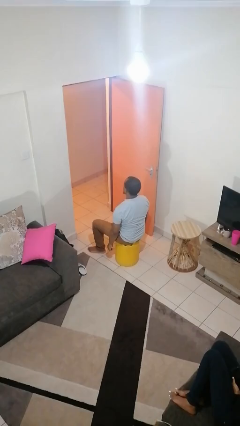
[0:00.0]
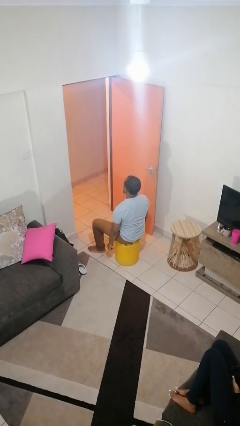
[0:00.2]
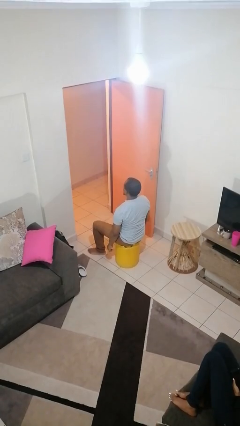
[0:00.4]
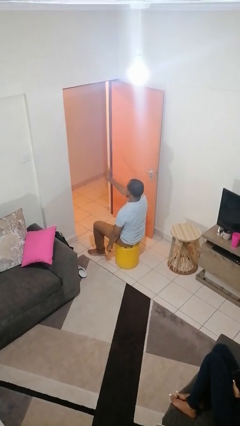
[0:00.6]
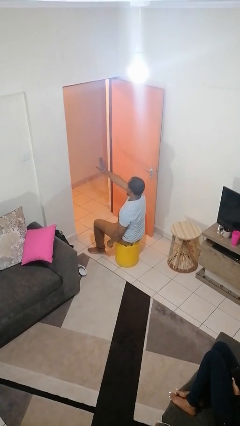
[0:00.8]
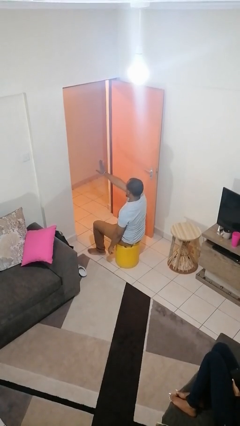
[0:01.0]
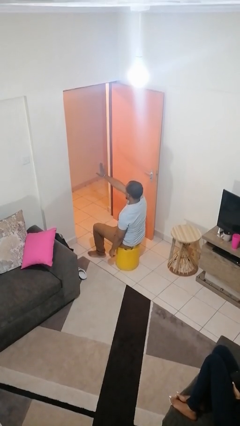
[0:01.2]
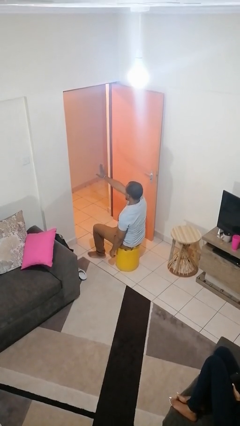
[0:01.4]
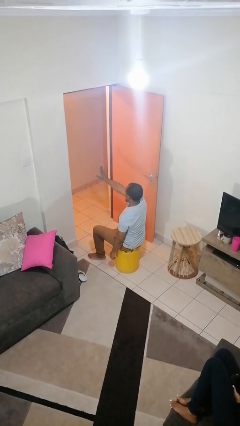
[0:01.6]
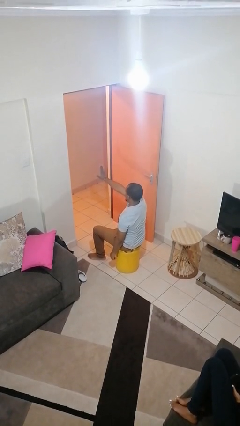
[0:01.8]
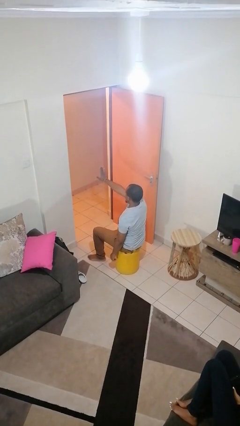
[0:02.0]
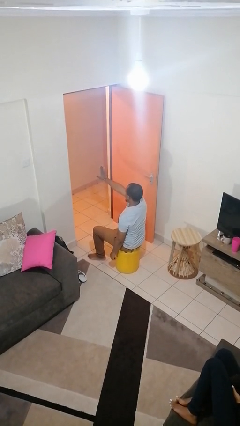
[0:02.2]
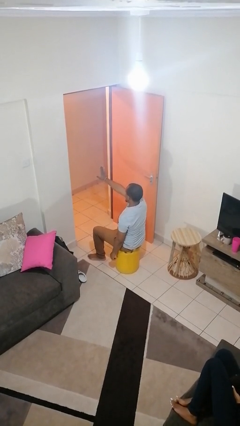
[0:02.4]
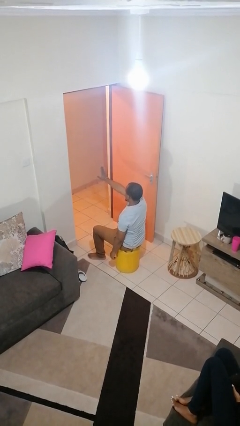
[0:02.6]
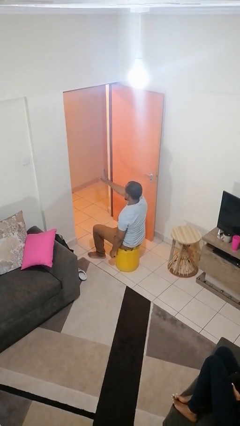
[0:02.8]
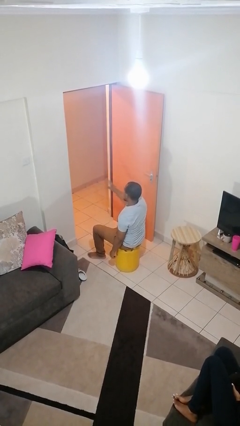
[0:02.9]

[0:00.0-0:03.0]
person gestures stop

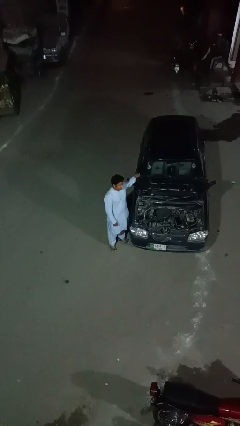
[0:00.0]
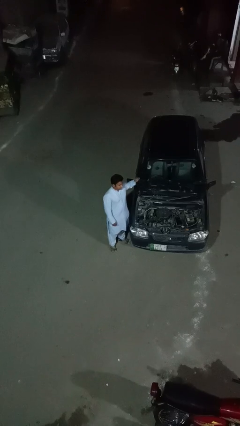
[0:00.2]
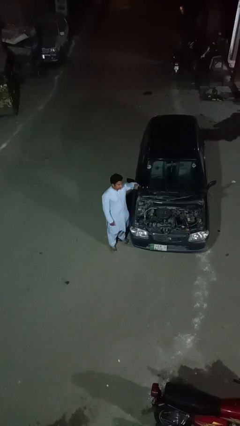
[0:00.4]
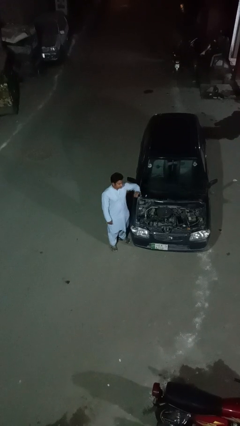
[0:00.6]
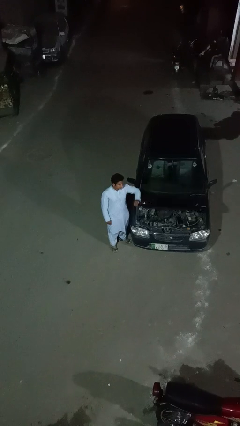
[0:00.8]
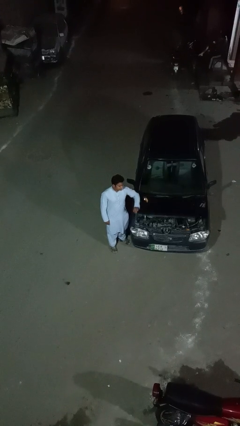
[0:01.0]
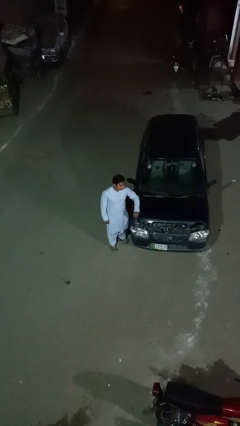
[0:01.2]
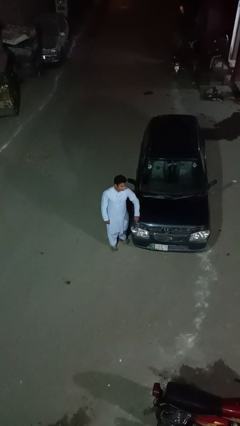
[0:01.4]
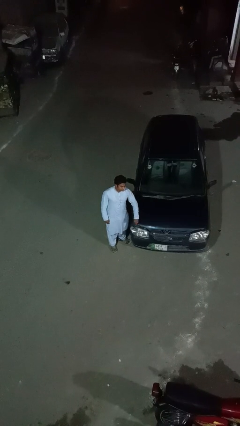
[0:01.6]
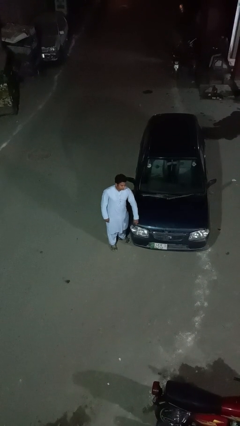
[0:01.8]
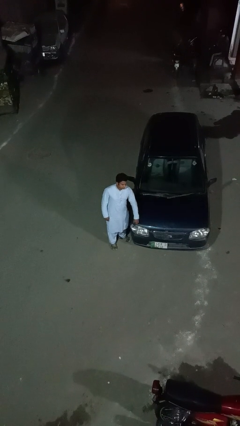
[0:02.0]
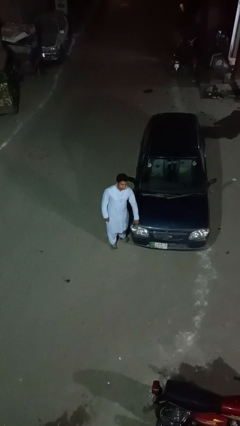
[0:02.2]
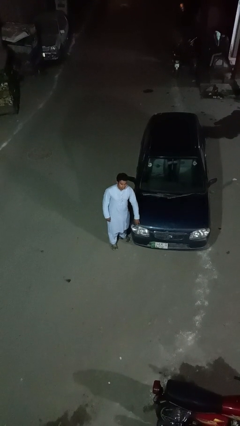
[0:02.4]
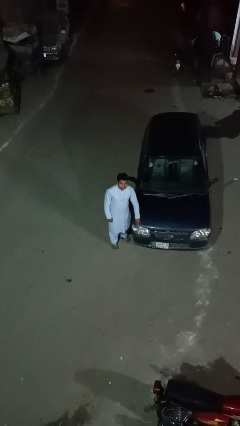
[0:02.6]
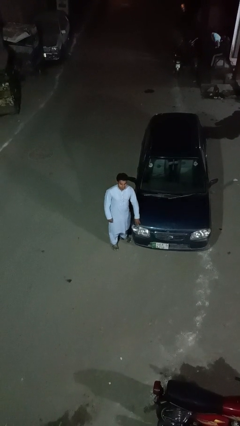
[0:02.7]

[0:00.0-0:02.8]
person closes car hood

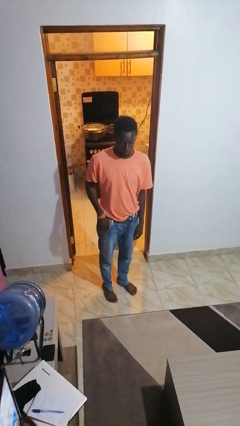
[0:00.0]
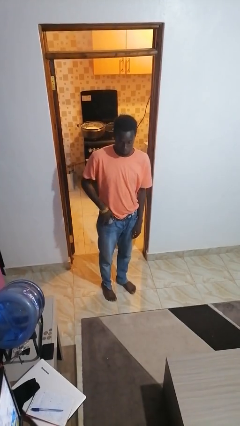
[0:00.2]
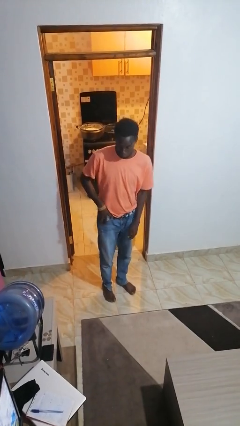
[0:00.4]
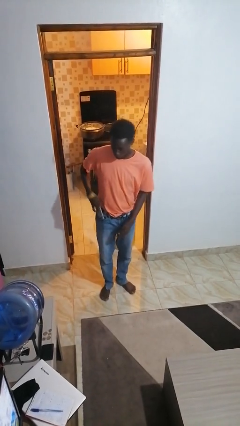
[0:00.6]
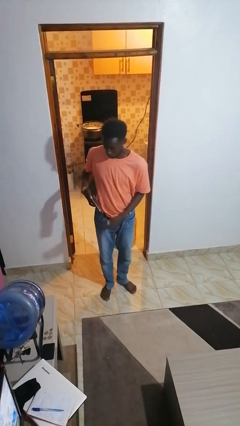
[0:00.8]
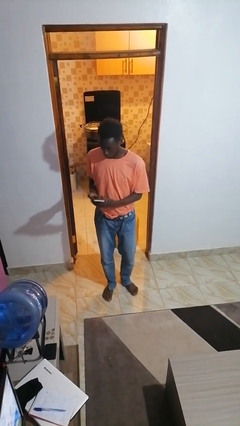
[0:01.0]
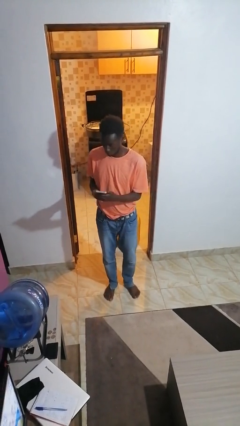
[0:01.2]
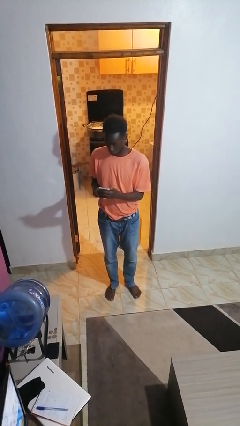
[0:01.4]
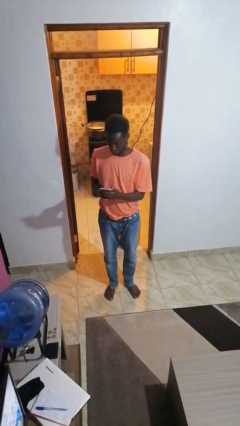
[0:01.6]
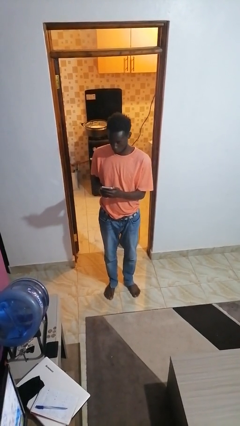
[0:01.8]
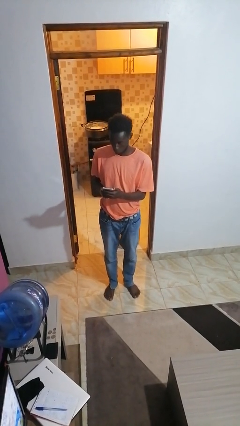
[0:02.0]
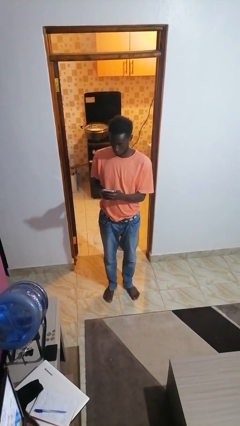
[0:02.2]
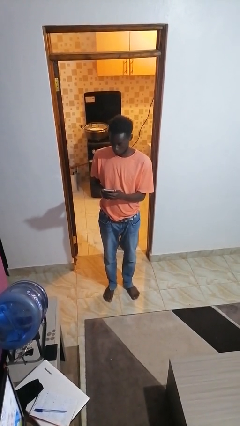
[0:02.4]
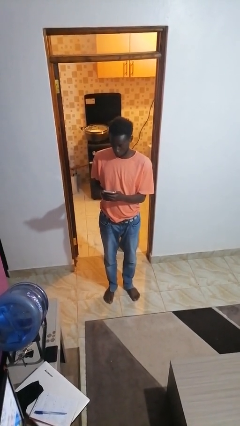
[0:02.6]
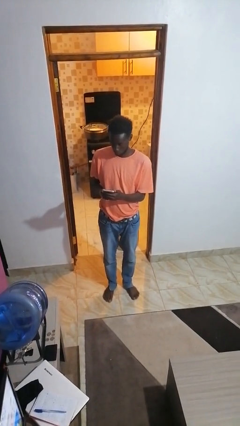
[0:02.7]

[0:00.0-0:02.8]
person takes phone from pocket

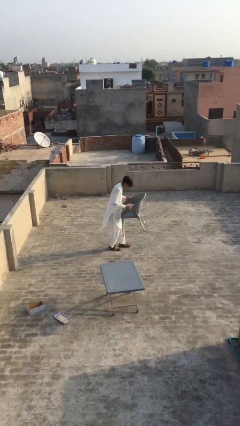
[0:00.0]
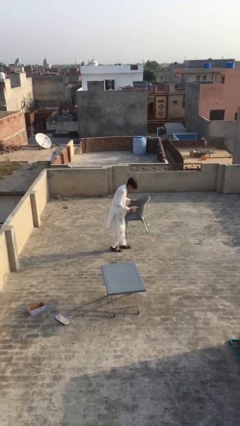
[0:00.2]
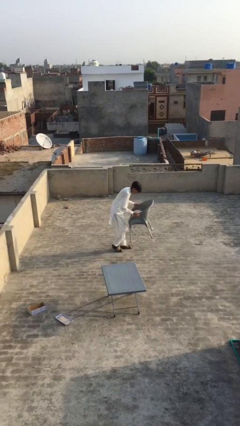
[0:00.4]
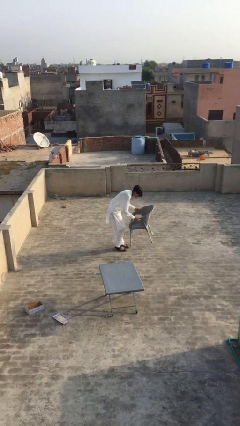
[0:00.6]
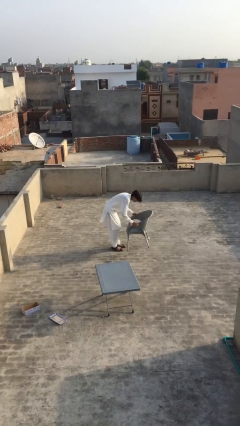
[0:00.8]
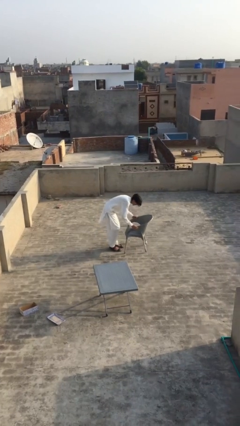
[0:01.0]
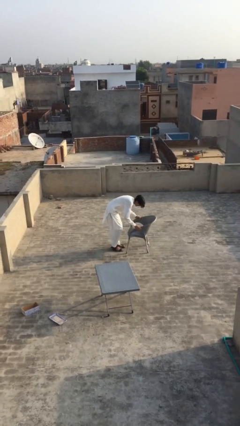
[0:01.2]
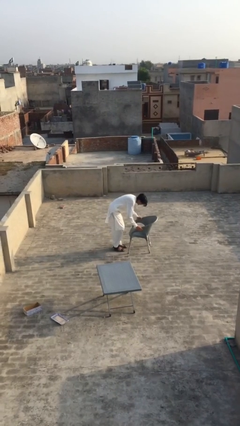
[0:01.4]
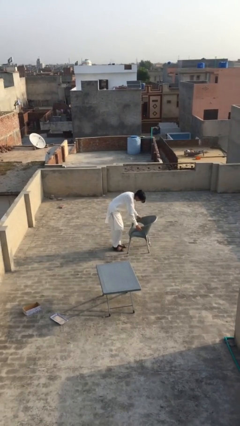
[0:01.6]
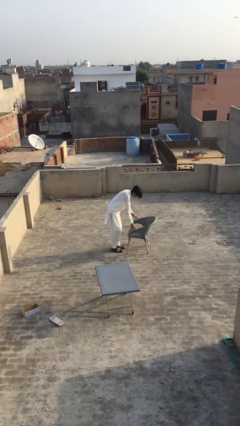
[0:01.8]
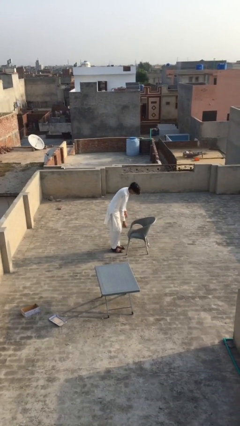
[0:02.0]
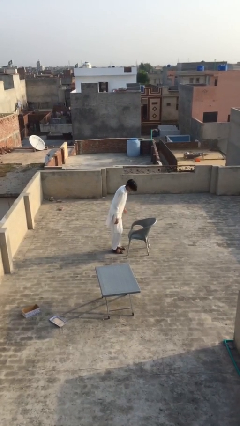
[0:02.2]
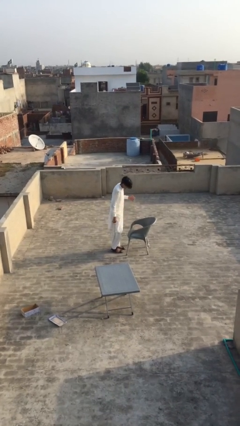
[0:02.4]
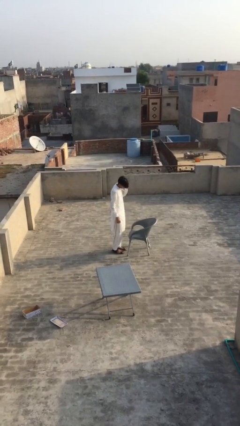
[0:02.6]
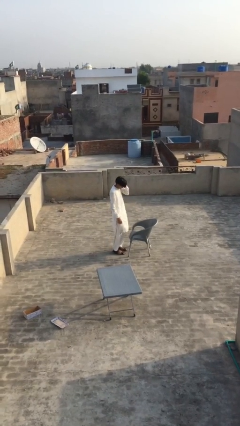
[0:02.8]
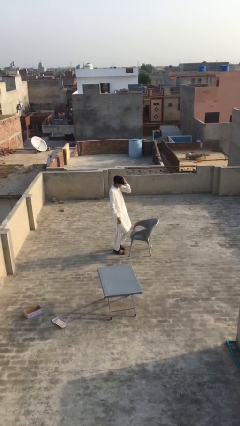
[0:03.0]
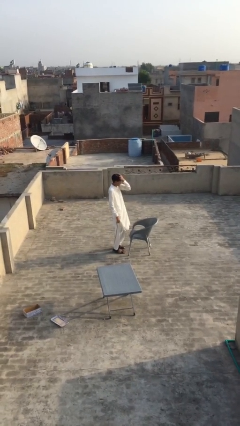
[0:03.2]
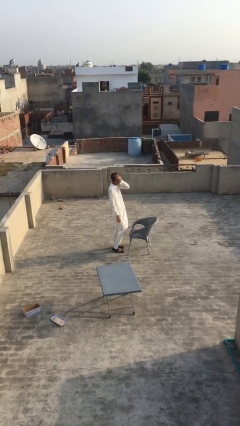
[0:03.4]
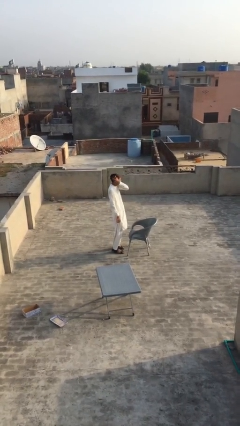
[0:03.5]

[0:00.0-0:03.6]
person puts down object on floor

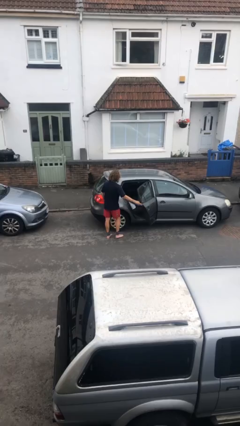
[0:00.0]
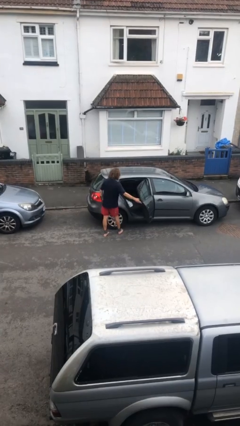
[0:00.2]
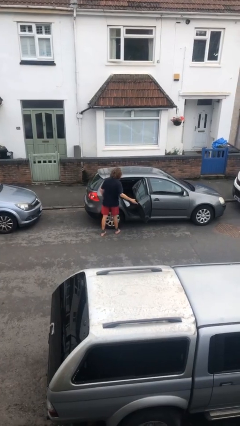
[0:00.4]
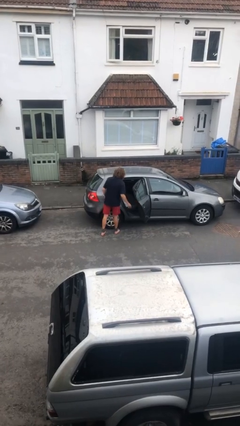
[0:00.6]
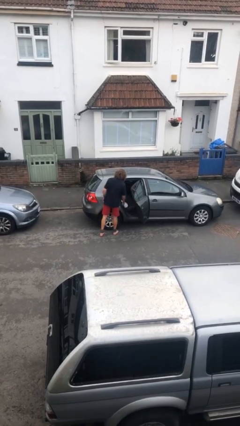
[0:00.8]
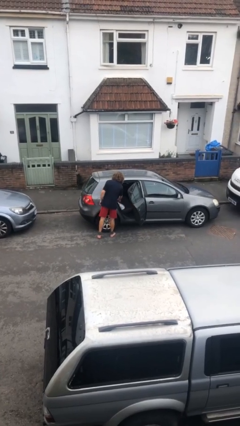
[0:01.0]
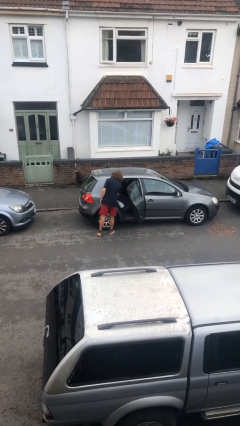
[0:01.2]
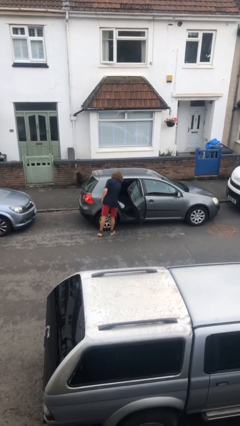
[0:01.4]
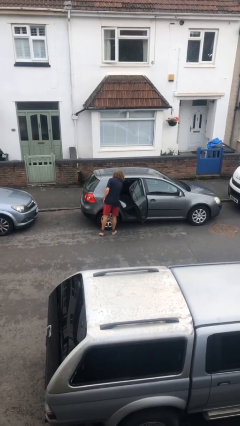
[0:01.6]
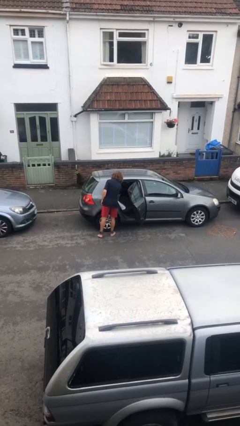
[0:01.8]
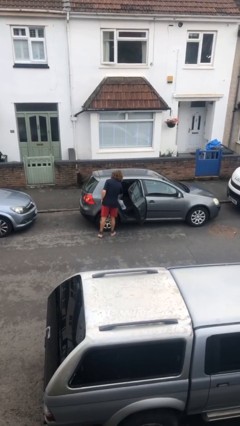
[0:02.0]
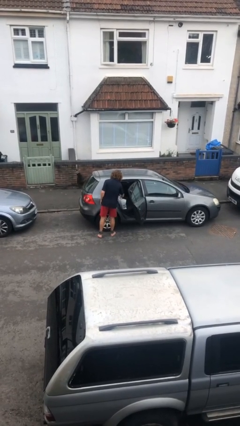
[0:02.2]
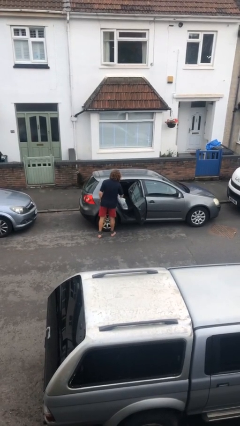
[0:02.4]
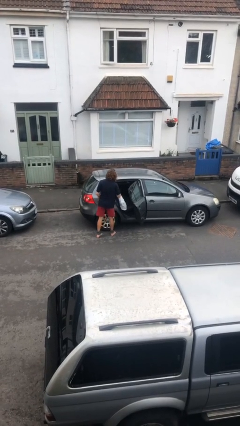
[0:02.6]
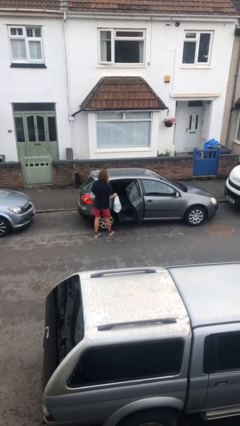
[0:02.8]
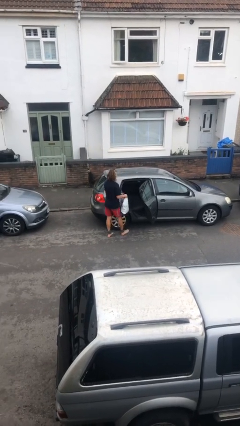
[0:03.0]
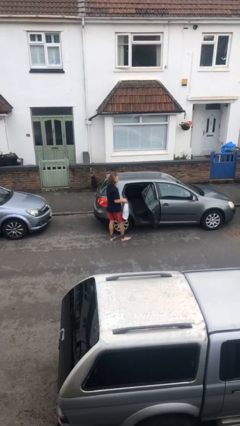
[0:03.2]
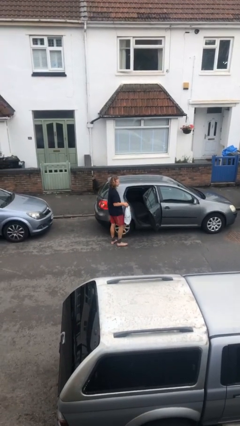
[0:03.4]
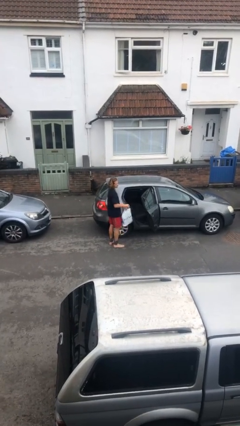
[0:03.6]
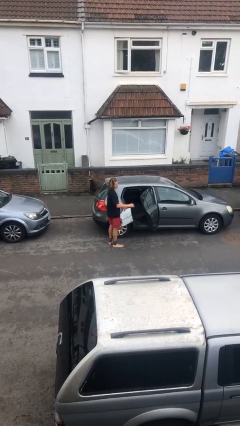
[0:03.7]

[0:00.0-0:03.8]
person unloads car

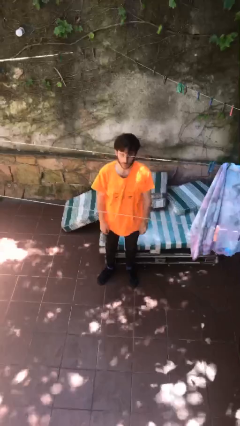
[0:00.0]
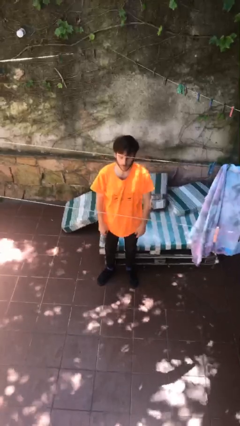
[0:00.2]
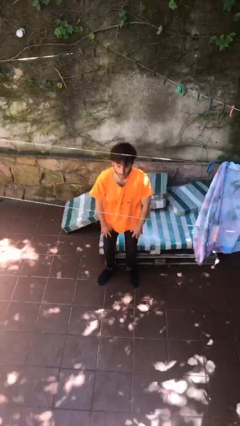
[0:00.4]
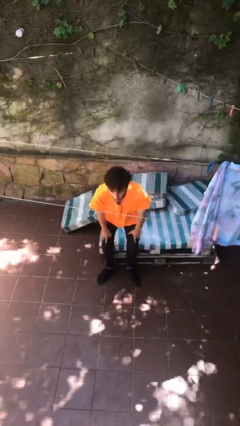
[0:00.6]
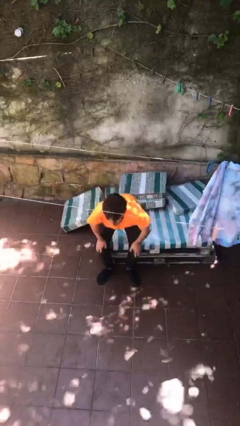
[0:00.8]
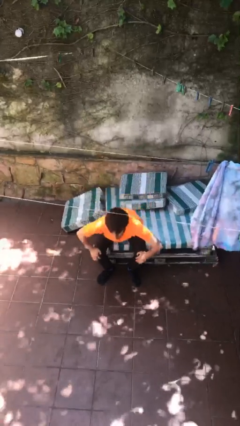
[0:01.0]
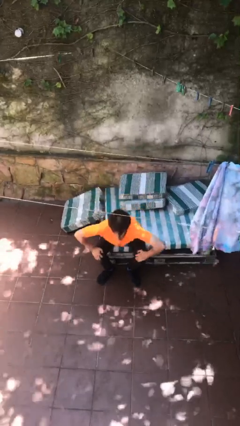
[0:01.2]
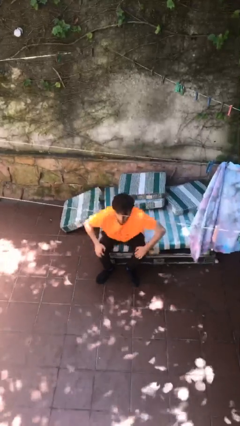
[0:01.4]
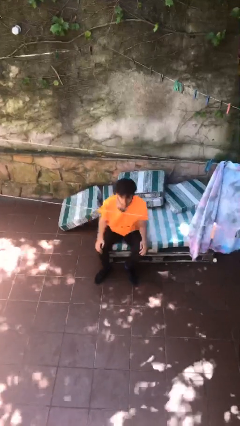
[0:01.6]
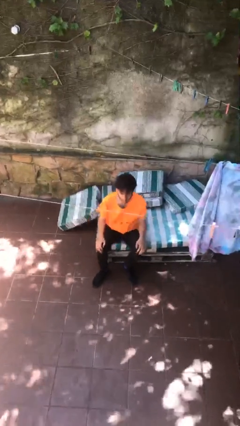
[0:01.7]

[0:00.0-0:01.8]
person sits down
